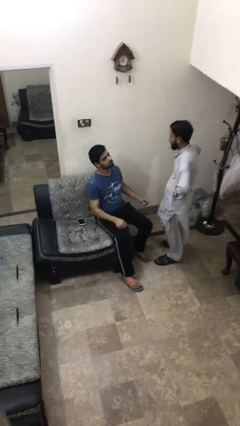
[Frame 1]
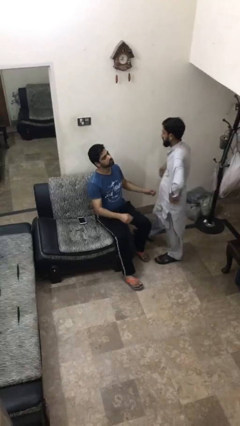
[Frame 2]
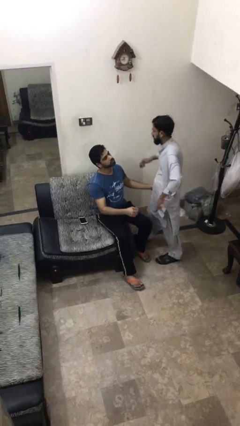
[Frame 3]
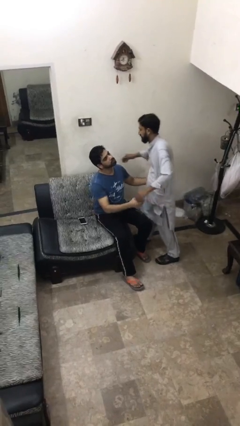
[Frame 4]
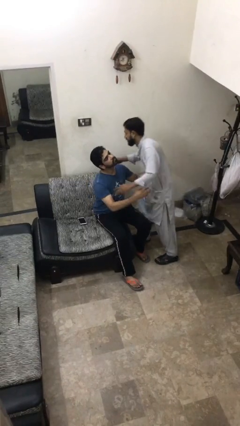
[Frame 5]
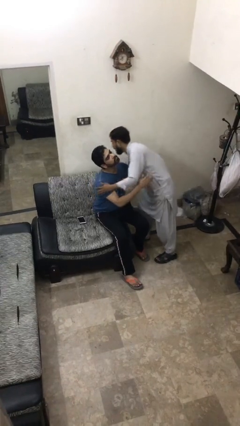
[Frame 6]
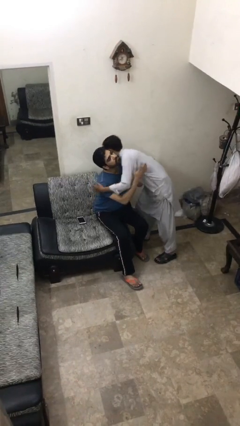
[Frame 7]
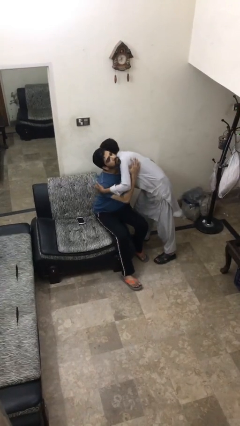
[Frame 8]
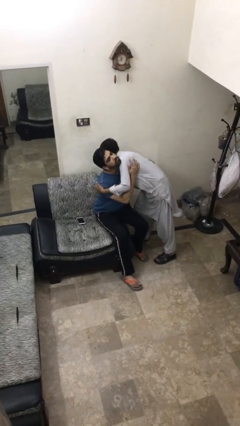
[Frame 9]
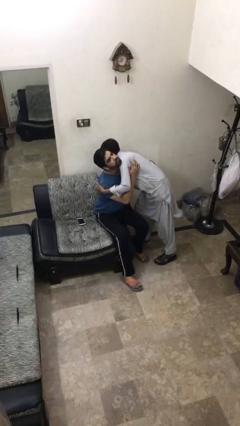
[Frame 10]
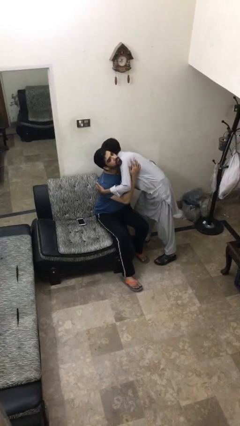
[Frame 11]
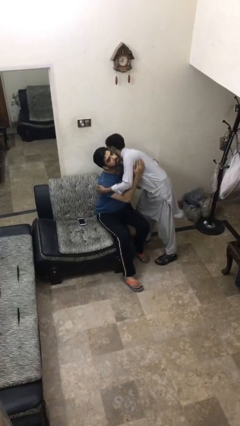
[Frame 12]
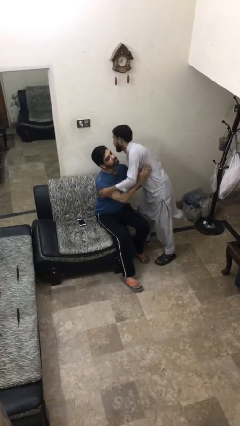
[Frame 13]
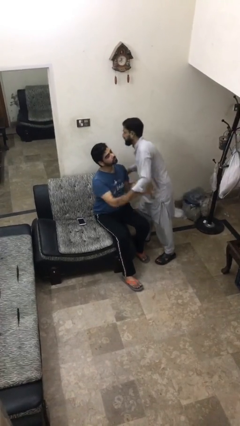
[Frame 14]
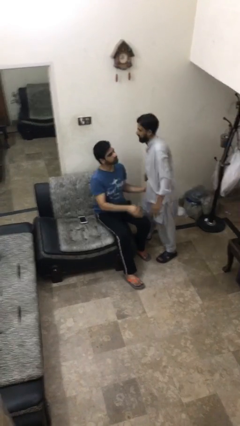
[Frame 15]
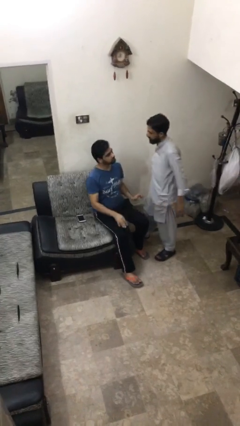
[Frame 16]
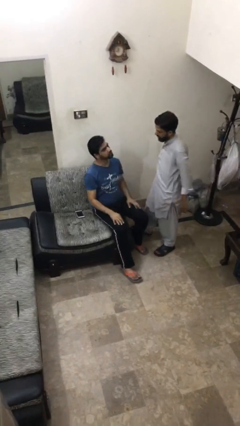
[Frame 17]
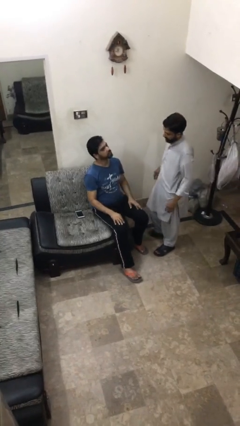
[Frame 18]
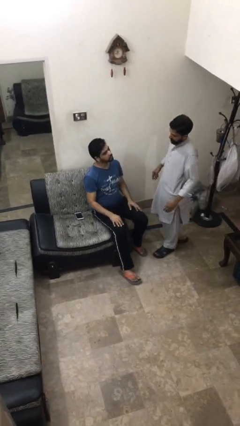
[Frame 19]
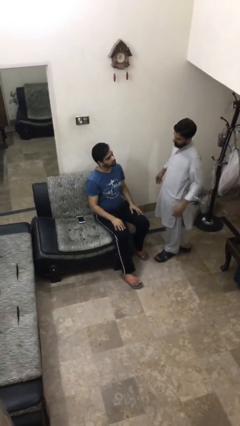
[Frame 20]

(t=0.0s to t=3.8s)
person embraces person

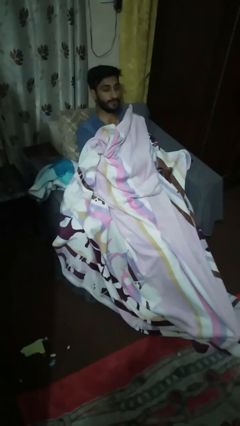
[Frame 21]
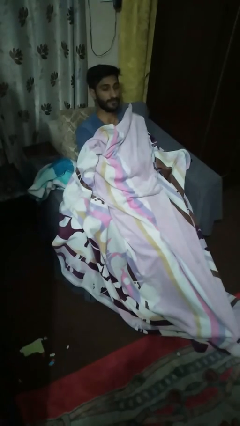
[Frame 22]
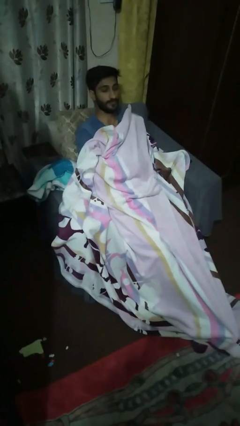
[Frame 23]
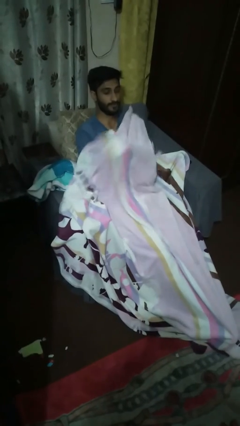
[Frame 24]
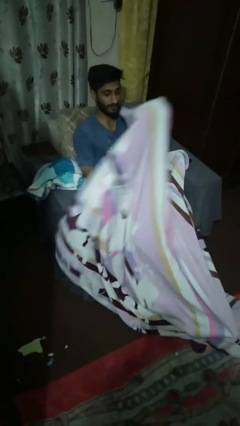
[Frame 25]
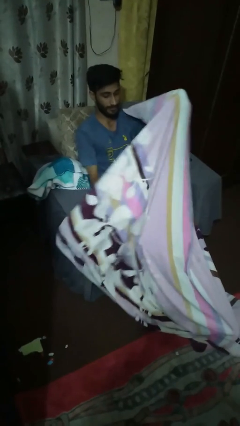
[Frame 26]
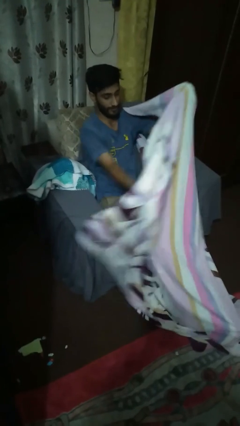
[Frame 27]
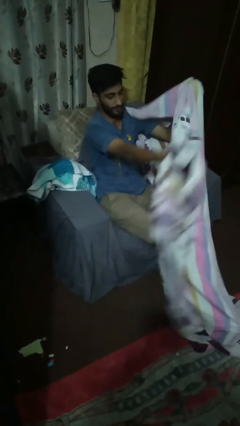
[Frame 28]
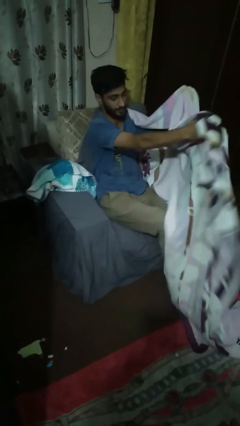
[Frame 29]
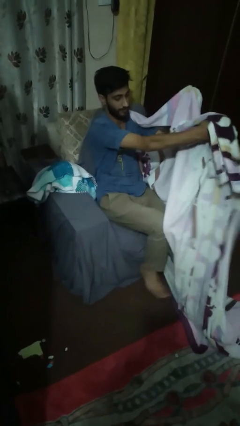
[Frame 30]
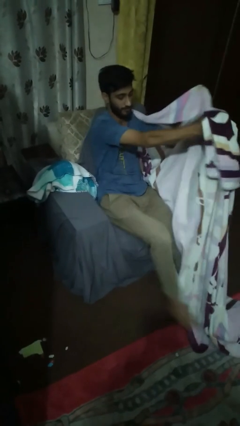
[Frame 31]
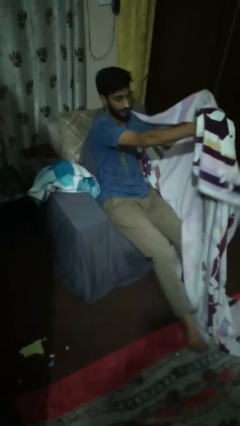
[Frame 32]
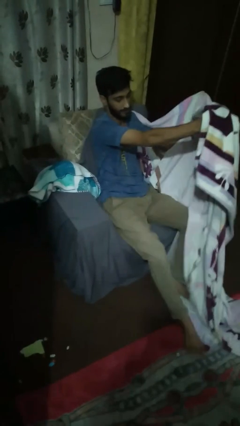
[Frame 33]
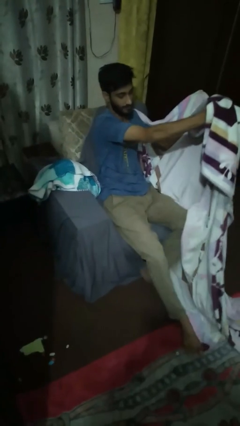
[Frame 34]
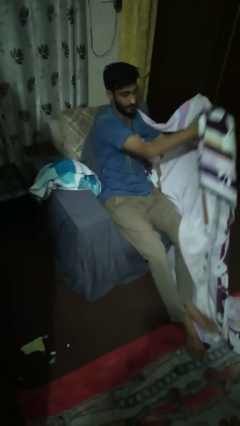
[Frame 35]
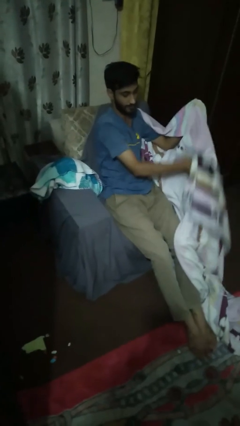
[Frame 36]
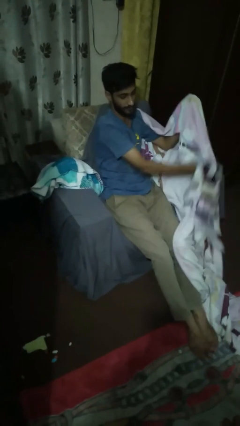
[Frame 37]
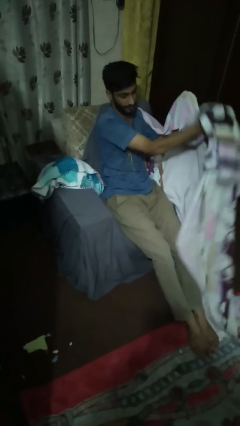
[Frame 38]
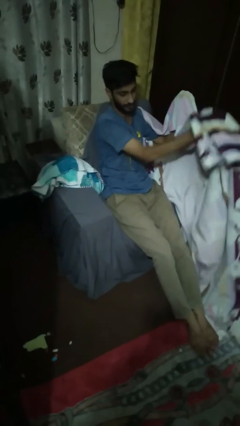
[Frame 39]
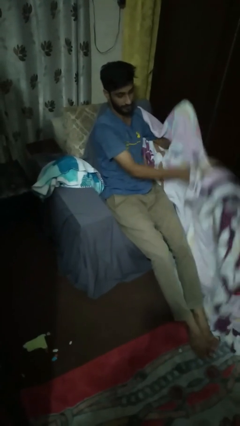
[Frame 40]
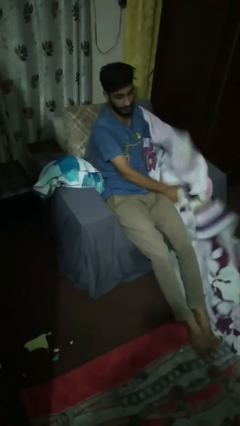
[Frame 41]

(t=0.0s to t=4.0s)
person uncovers with blanket

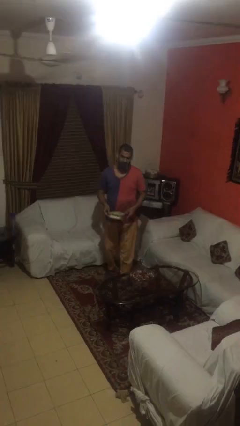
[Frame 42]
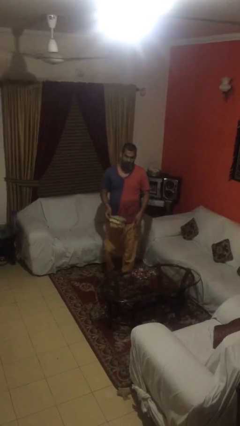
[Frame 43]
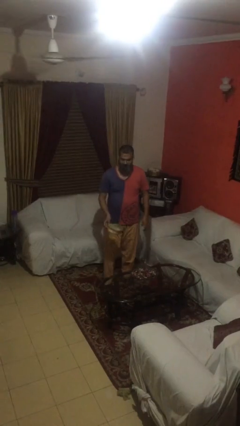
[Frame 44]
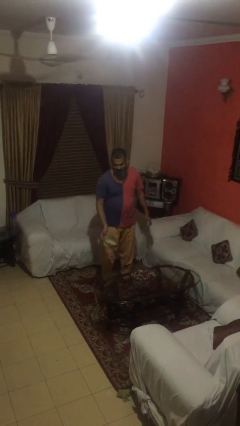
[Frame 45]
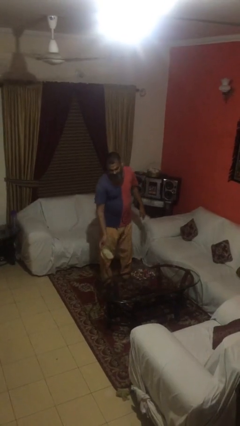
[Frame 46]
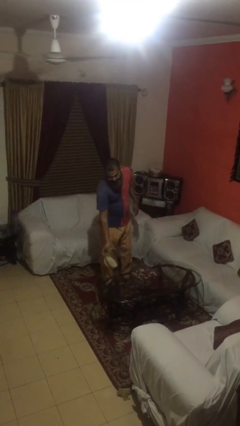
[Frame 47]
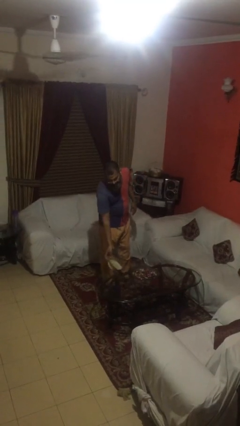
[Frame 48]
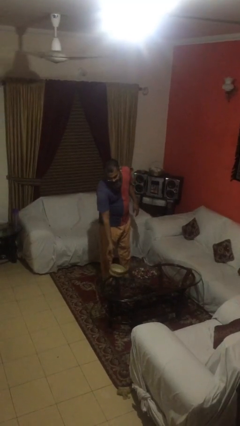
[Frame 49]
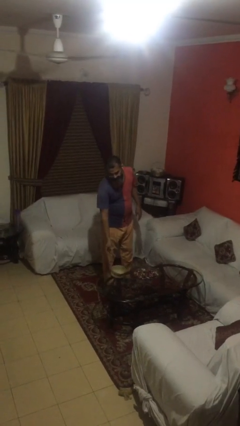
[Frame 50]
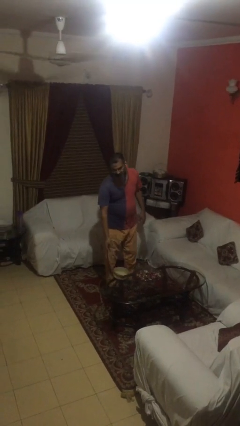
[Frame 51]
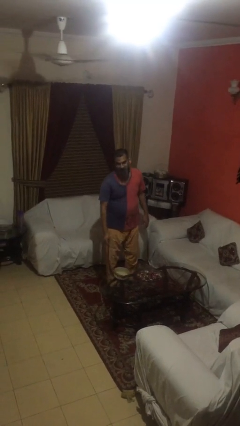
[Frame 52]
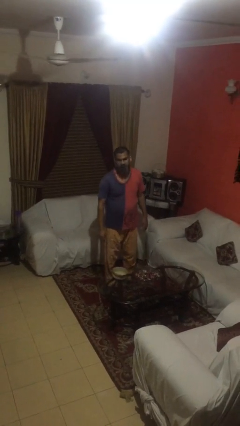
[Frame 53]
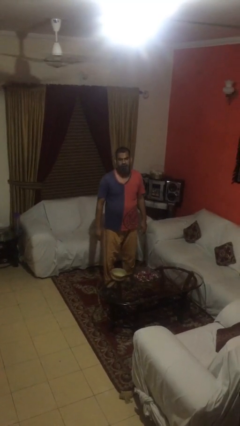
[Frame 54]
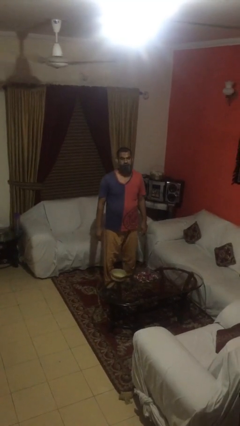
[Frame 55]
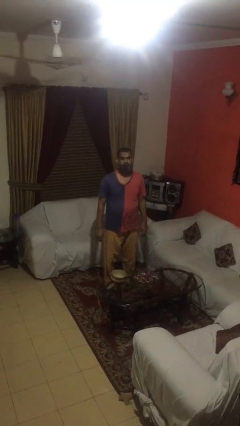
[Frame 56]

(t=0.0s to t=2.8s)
person puts down object on table

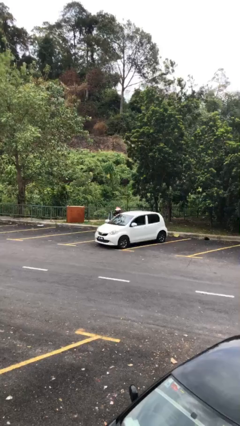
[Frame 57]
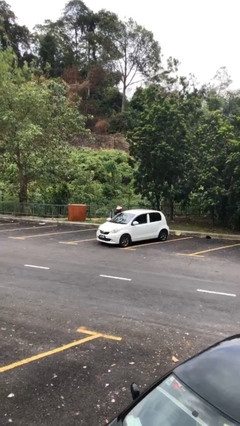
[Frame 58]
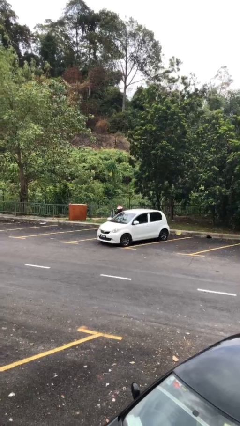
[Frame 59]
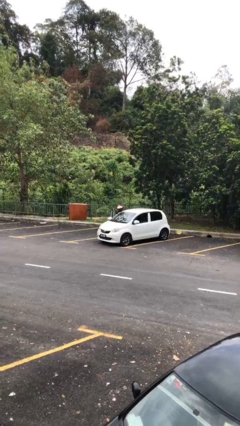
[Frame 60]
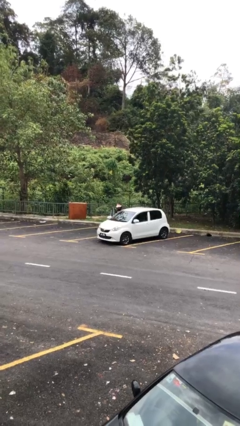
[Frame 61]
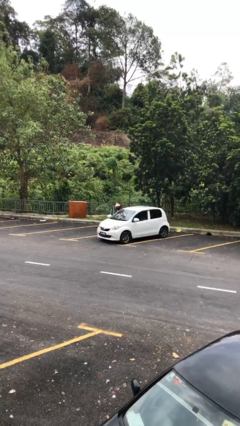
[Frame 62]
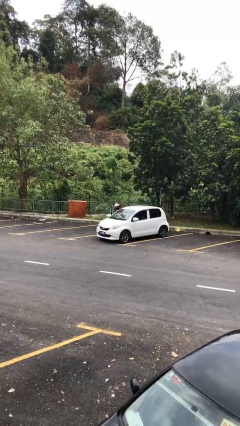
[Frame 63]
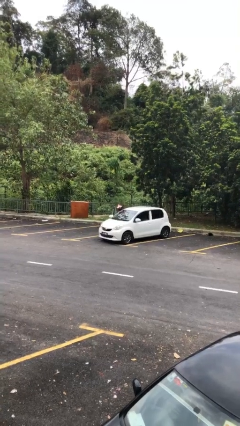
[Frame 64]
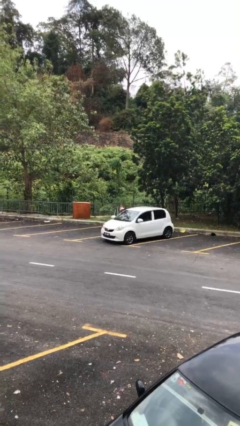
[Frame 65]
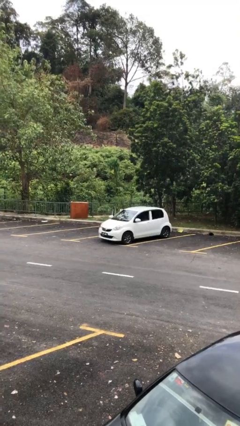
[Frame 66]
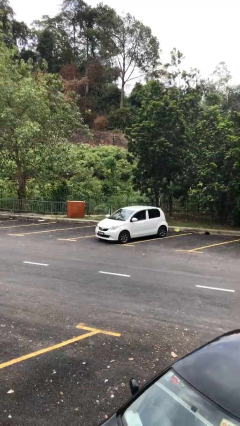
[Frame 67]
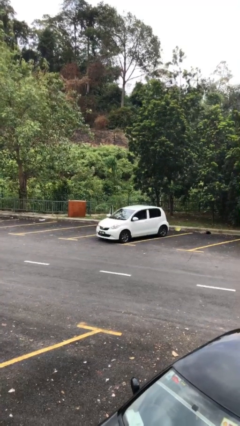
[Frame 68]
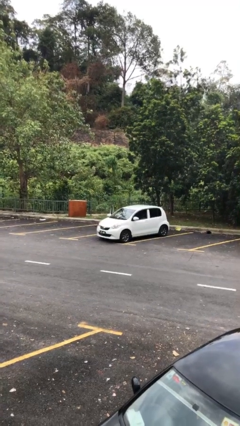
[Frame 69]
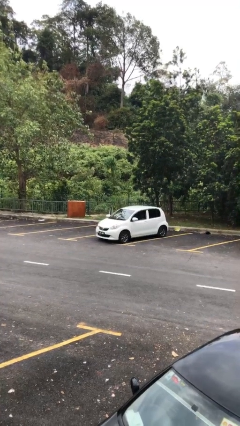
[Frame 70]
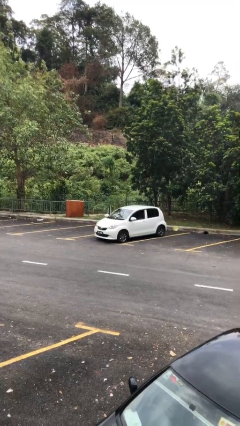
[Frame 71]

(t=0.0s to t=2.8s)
person enters car

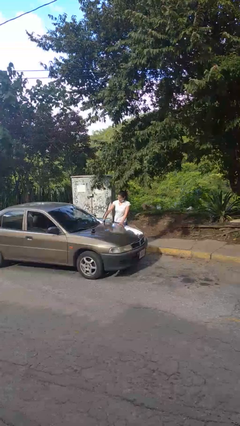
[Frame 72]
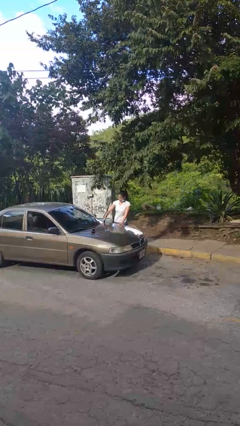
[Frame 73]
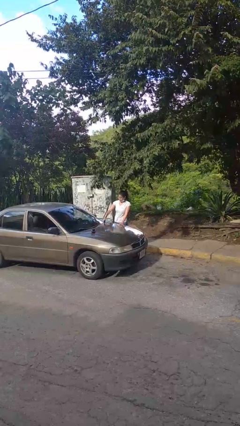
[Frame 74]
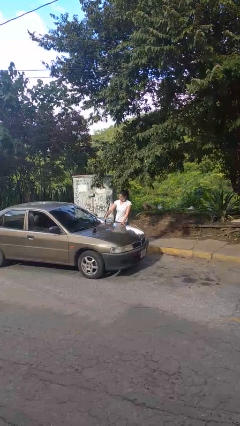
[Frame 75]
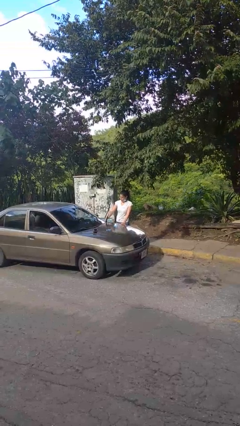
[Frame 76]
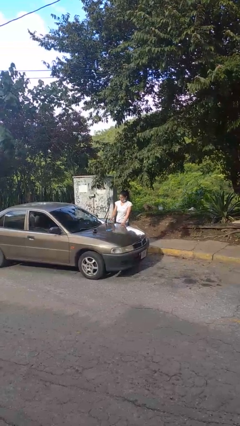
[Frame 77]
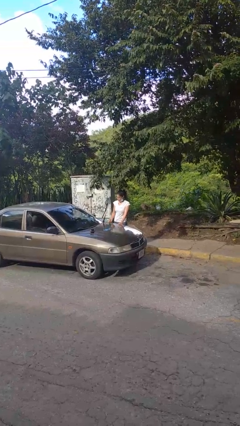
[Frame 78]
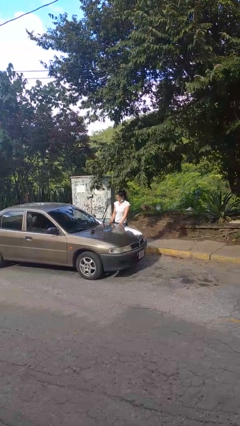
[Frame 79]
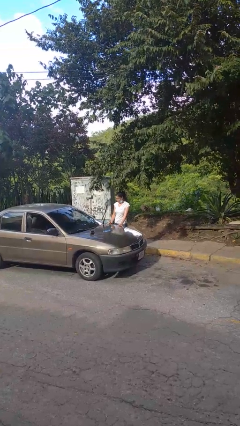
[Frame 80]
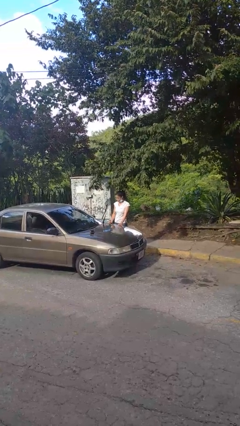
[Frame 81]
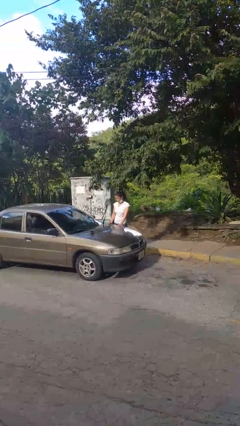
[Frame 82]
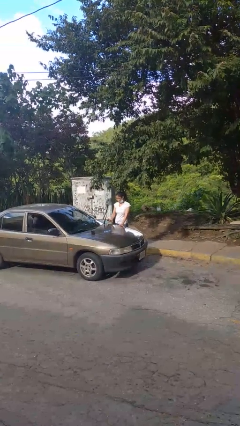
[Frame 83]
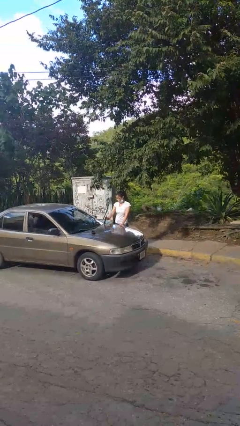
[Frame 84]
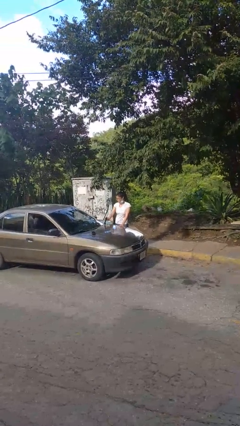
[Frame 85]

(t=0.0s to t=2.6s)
person flips up car wipers

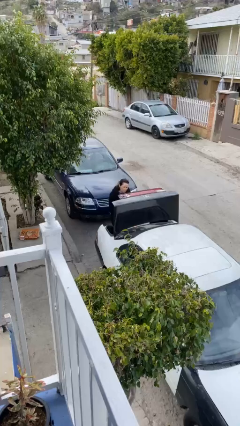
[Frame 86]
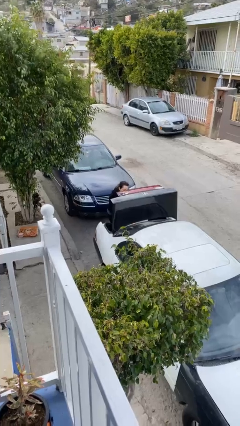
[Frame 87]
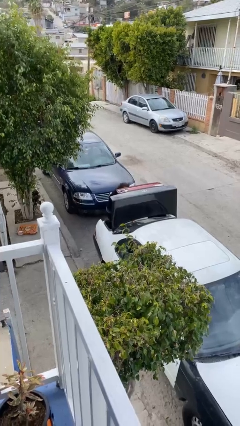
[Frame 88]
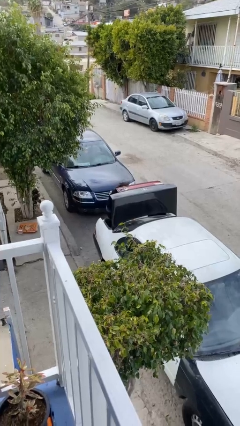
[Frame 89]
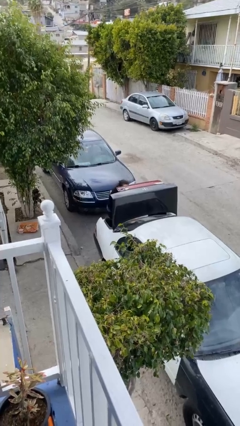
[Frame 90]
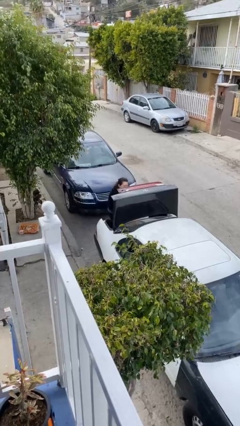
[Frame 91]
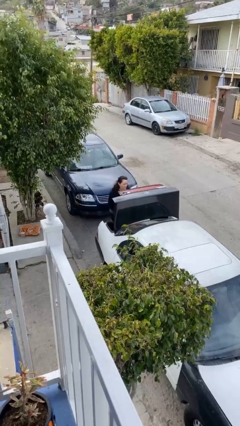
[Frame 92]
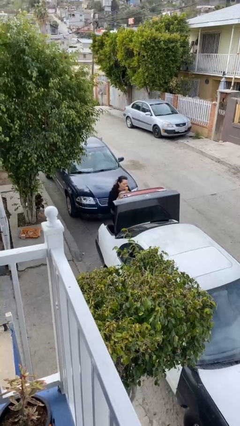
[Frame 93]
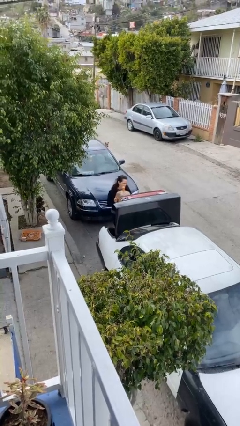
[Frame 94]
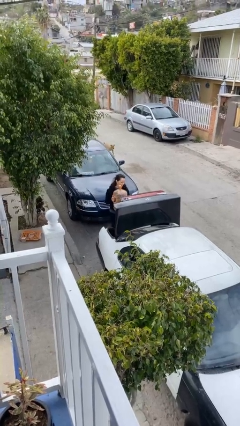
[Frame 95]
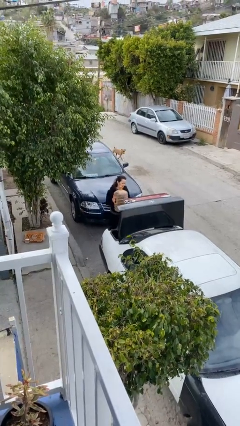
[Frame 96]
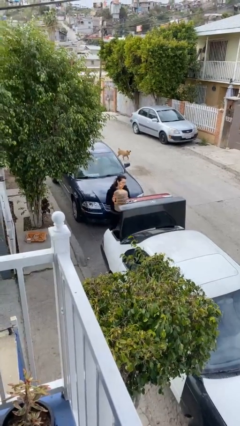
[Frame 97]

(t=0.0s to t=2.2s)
person unloads car
